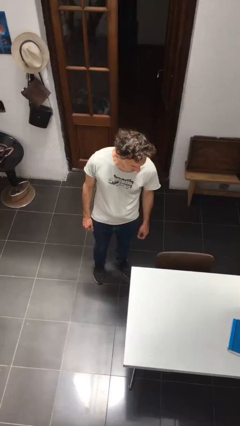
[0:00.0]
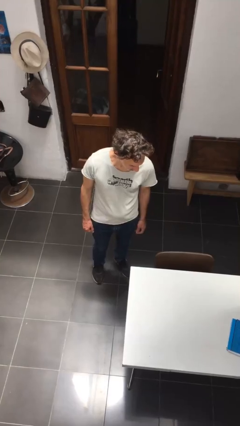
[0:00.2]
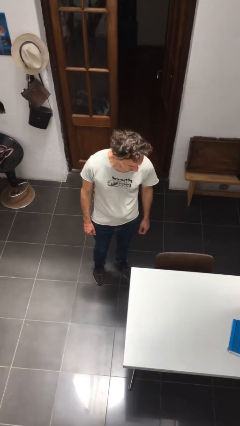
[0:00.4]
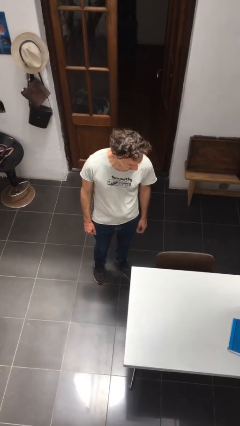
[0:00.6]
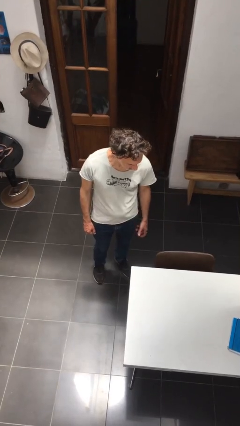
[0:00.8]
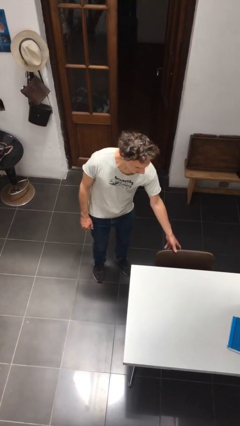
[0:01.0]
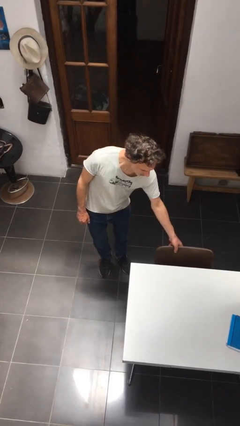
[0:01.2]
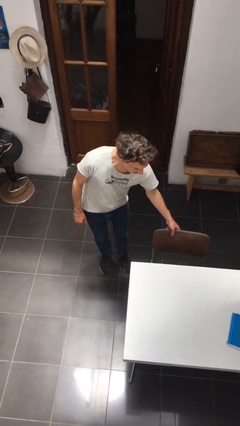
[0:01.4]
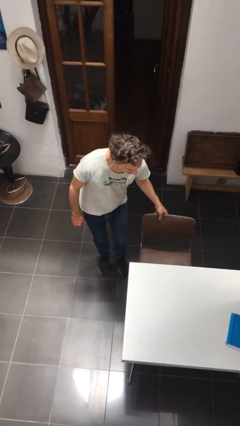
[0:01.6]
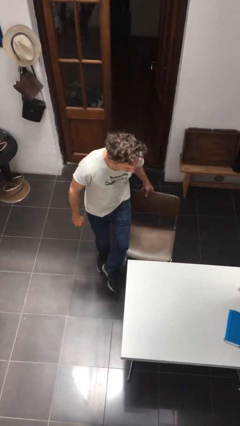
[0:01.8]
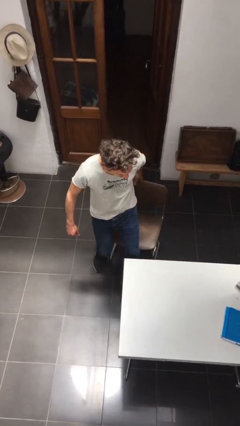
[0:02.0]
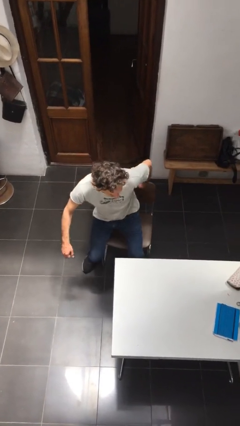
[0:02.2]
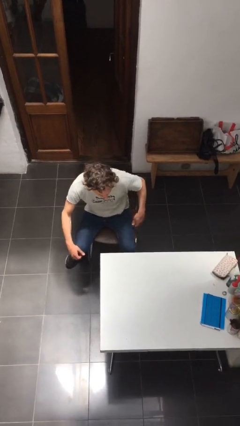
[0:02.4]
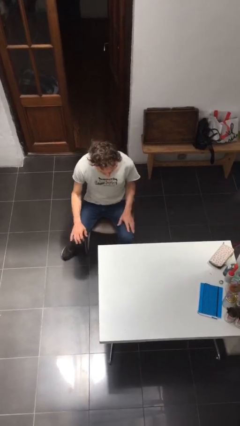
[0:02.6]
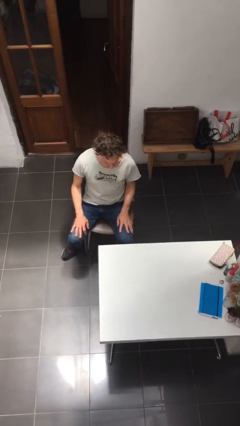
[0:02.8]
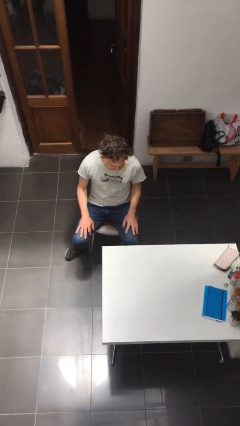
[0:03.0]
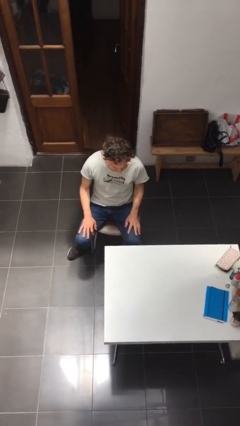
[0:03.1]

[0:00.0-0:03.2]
person sits down

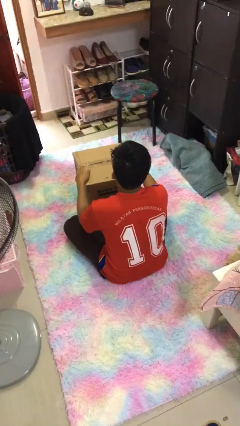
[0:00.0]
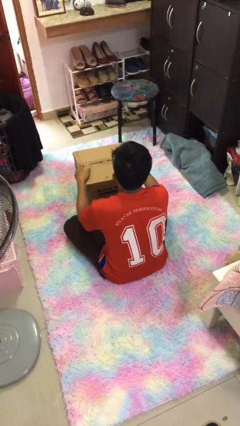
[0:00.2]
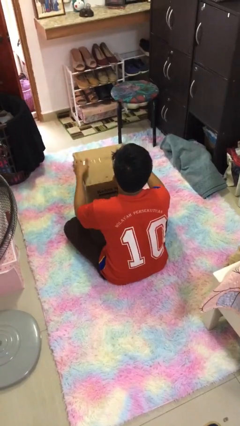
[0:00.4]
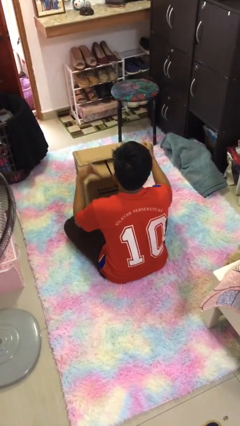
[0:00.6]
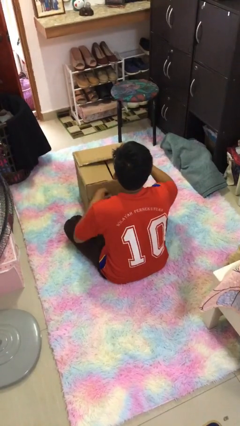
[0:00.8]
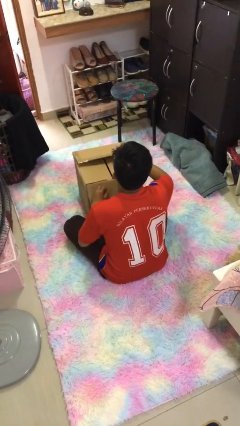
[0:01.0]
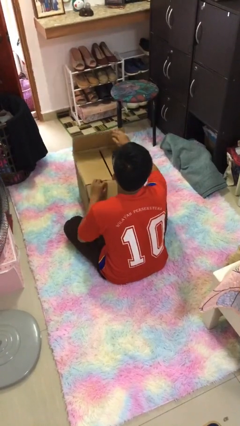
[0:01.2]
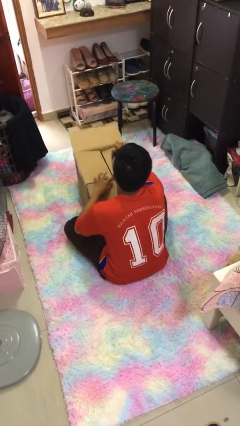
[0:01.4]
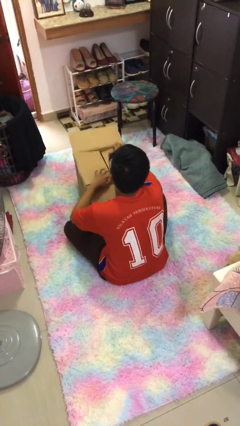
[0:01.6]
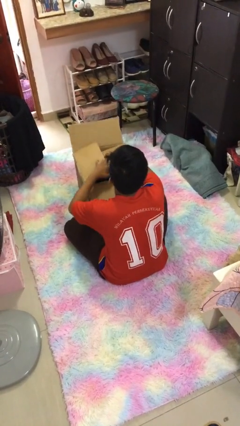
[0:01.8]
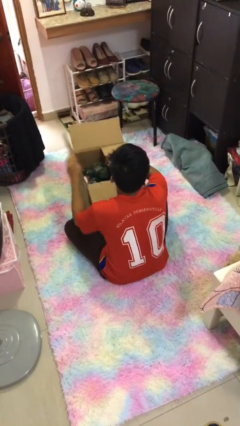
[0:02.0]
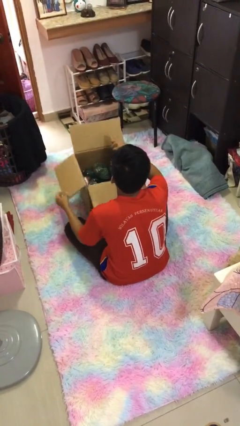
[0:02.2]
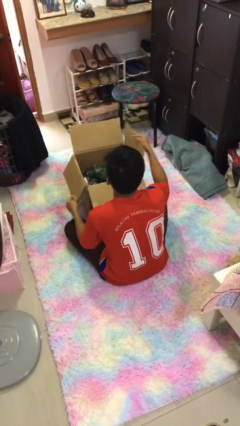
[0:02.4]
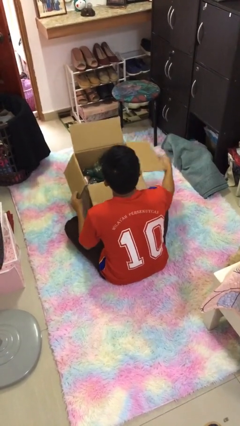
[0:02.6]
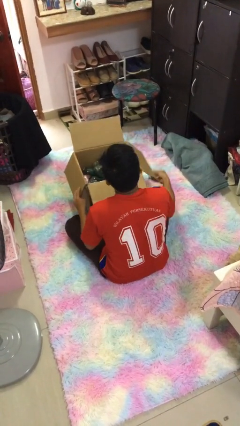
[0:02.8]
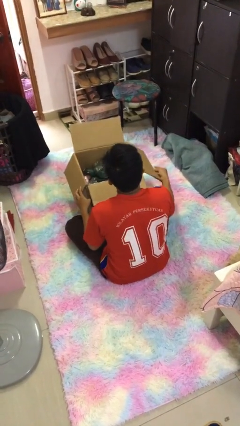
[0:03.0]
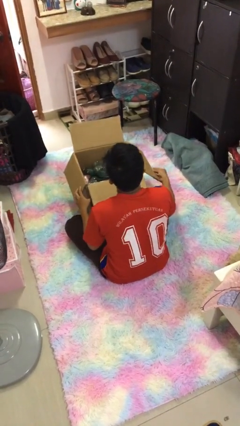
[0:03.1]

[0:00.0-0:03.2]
person opens box

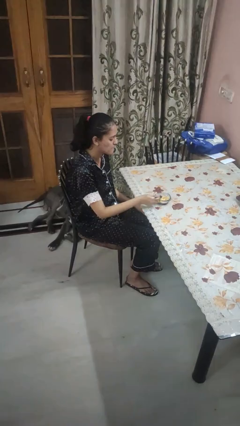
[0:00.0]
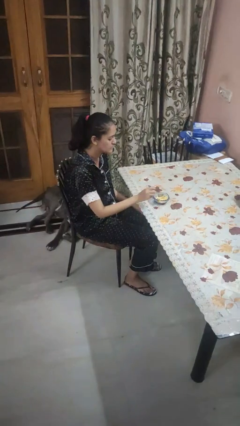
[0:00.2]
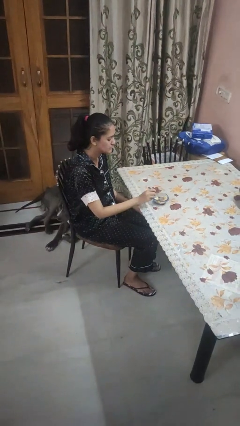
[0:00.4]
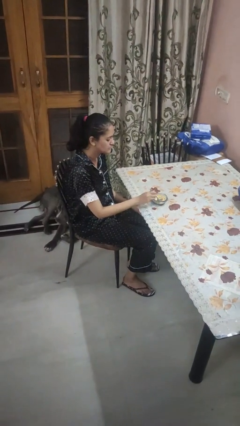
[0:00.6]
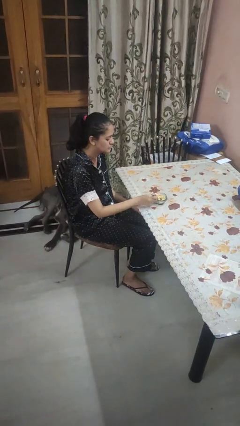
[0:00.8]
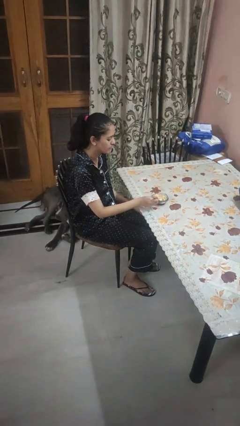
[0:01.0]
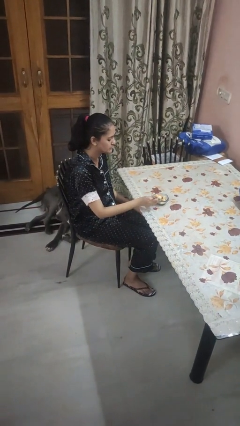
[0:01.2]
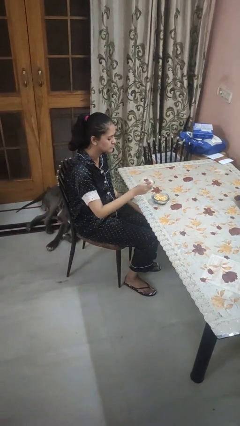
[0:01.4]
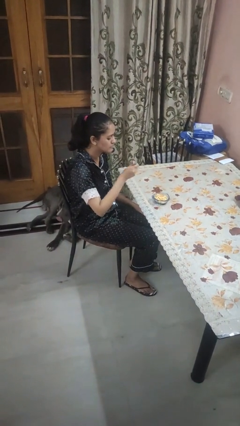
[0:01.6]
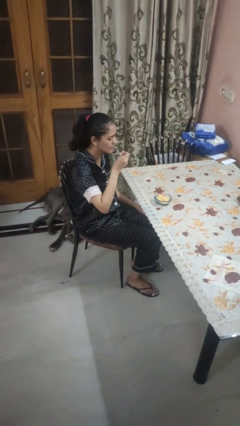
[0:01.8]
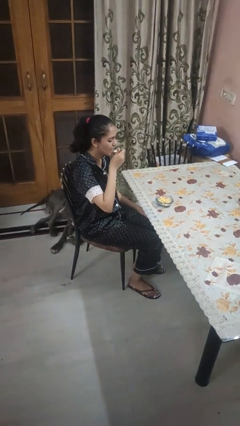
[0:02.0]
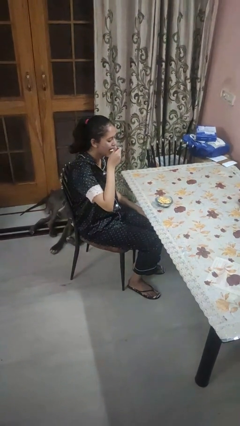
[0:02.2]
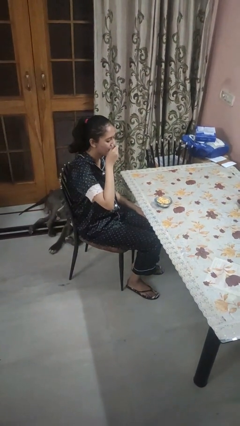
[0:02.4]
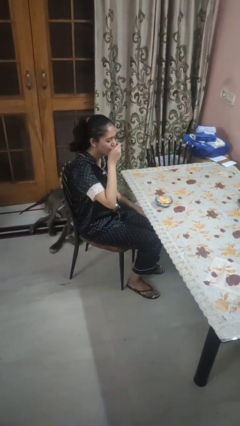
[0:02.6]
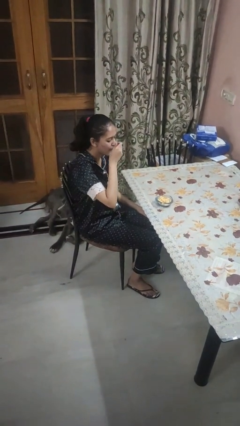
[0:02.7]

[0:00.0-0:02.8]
person eats with utensil

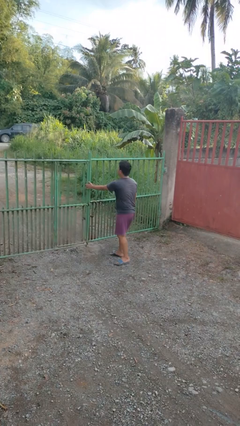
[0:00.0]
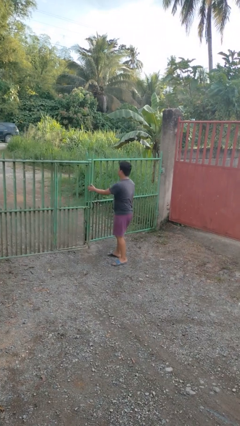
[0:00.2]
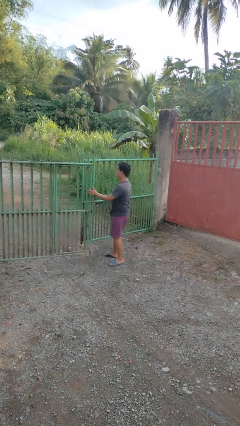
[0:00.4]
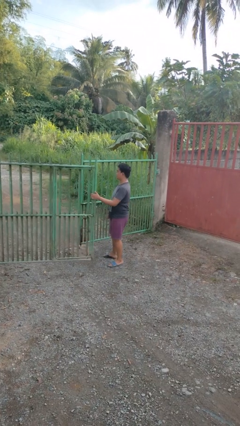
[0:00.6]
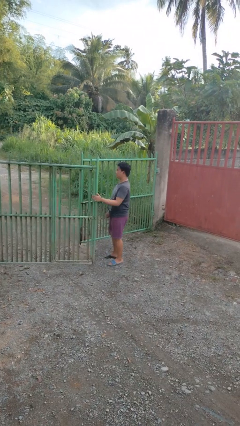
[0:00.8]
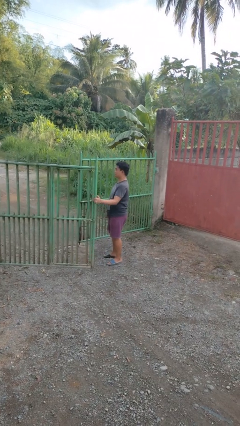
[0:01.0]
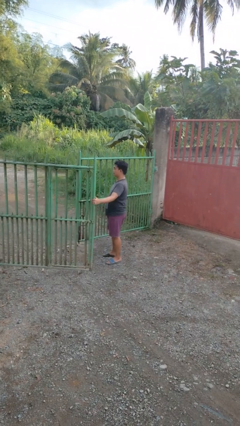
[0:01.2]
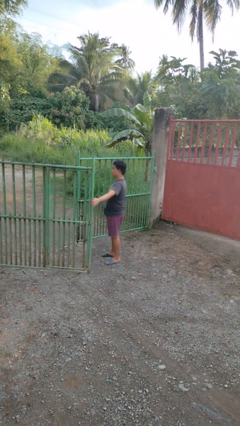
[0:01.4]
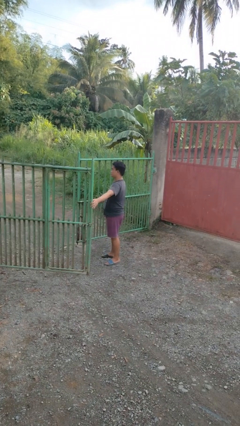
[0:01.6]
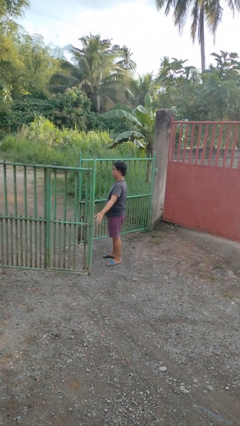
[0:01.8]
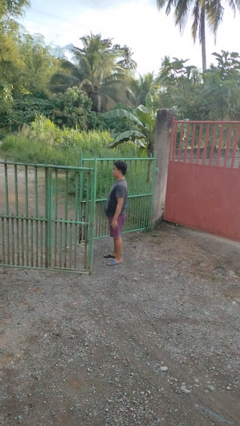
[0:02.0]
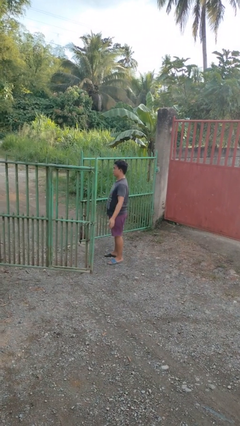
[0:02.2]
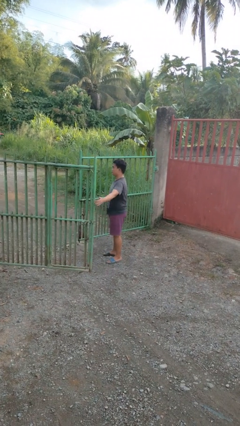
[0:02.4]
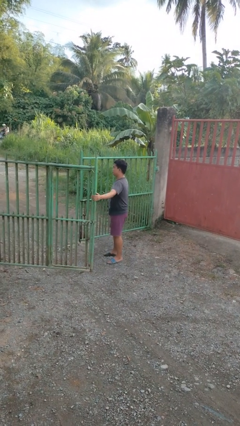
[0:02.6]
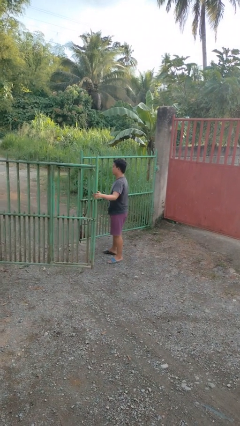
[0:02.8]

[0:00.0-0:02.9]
person opens gate

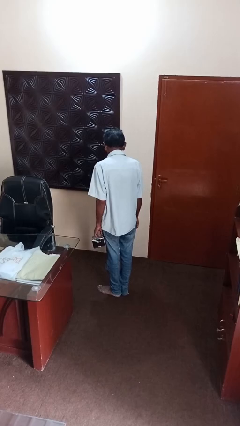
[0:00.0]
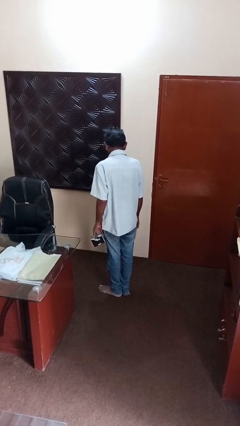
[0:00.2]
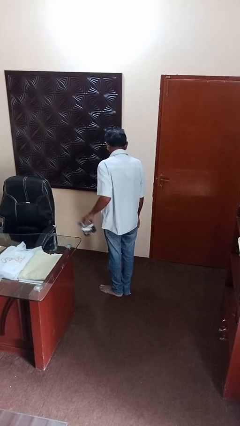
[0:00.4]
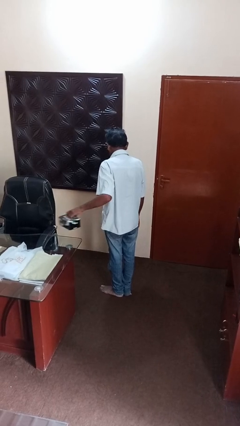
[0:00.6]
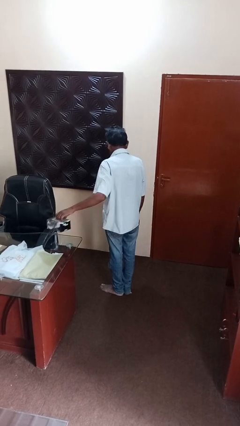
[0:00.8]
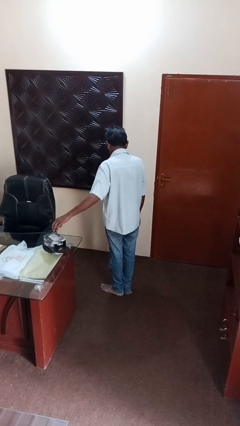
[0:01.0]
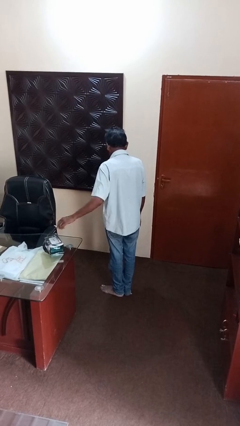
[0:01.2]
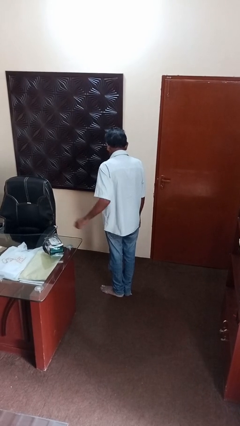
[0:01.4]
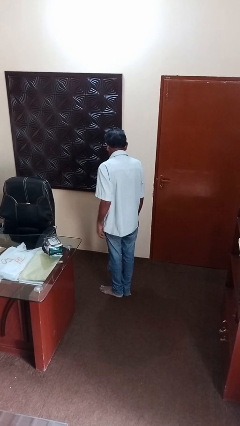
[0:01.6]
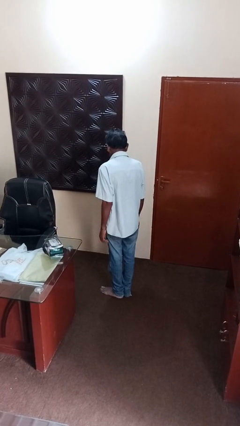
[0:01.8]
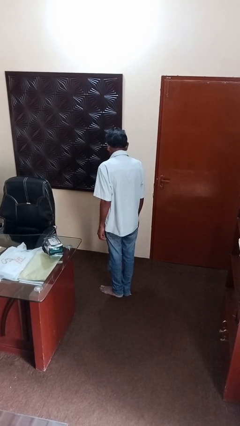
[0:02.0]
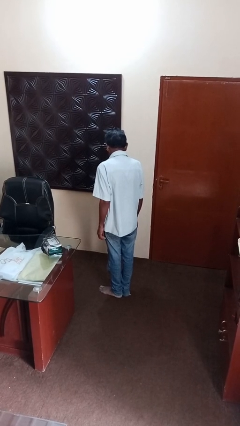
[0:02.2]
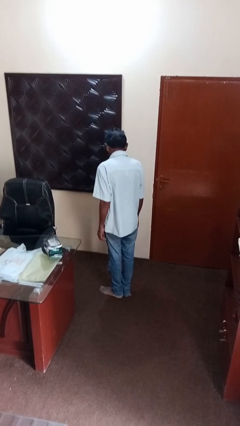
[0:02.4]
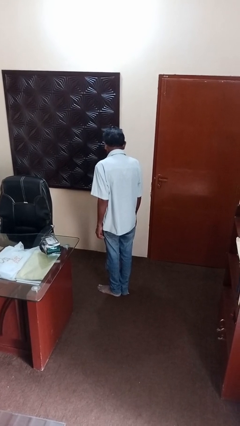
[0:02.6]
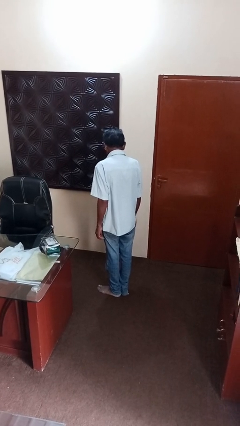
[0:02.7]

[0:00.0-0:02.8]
person throws object on table

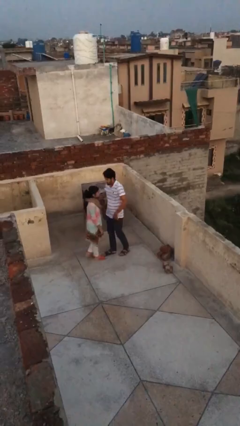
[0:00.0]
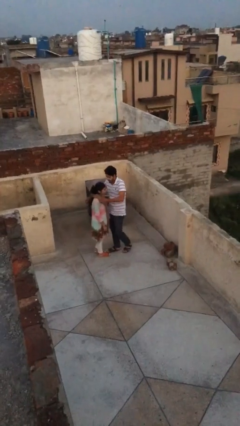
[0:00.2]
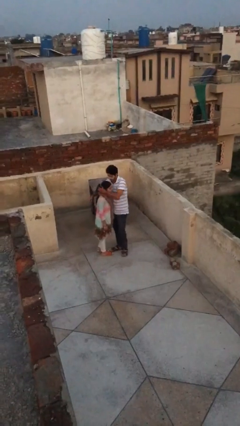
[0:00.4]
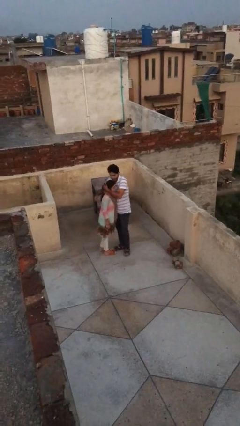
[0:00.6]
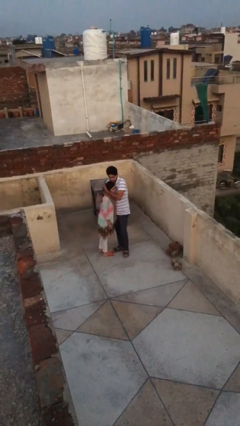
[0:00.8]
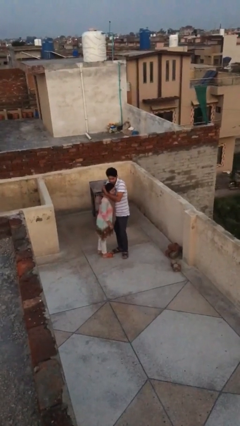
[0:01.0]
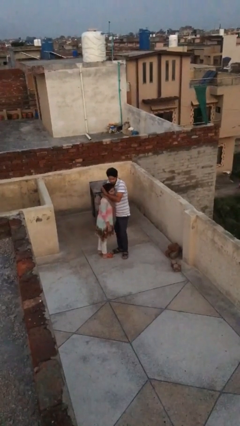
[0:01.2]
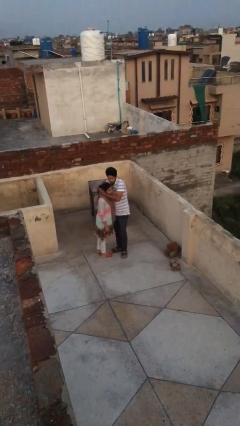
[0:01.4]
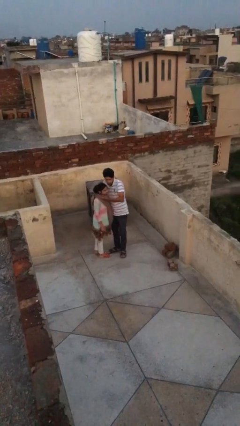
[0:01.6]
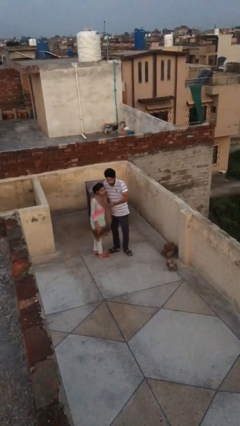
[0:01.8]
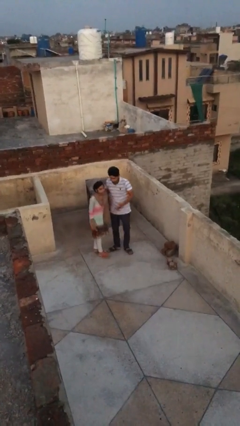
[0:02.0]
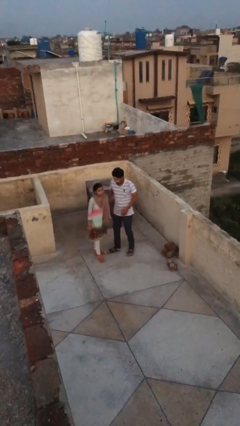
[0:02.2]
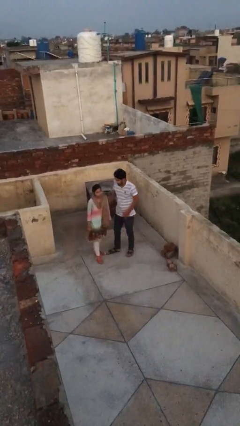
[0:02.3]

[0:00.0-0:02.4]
person embraces person

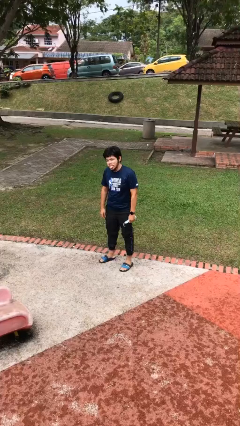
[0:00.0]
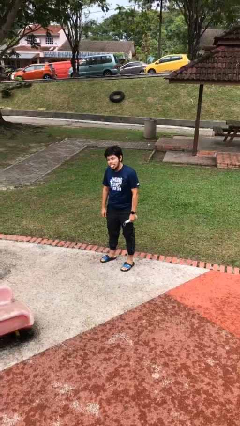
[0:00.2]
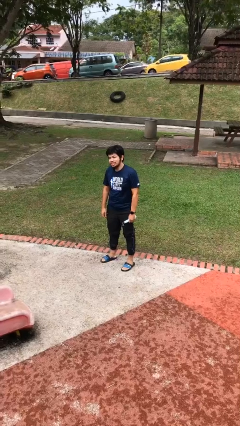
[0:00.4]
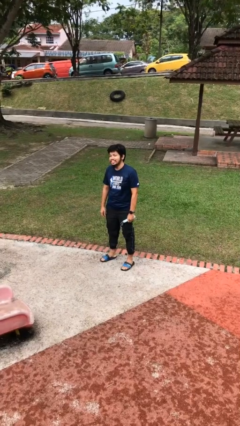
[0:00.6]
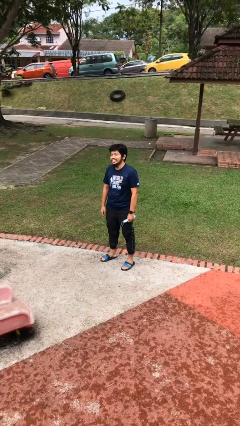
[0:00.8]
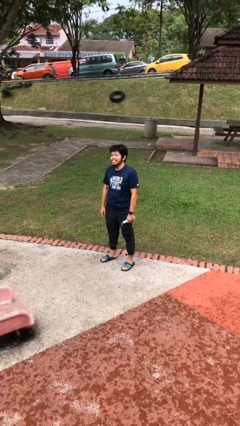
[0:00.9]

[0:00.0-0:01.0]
person sticks out tongue
